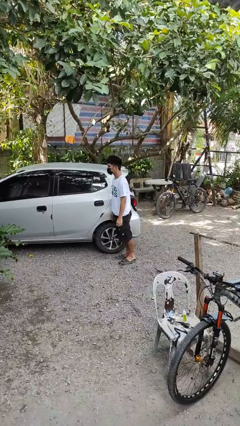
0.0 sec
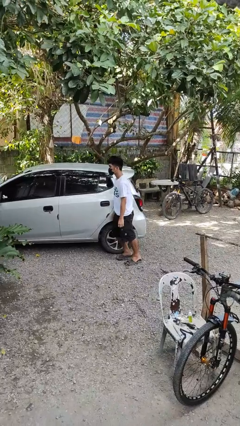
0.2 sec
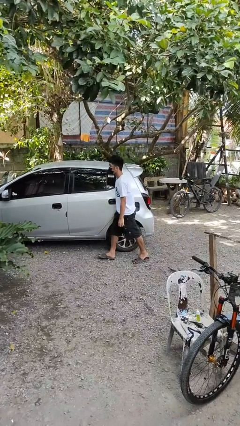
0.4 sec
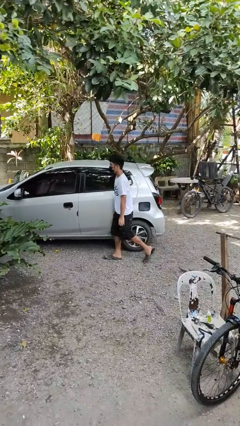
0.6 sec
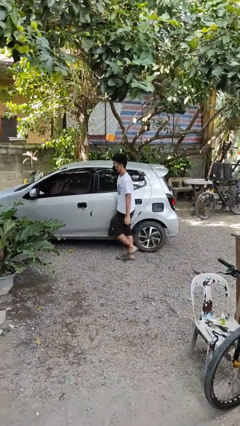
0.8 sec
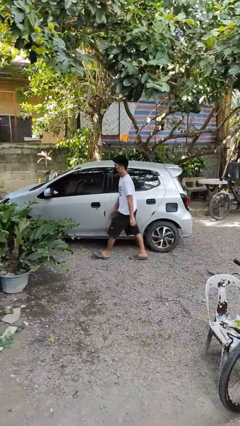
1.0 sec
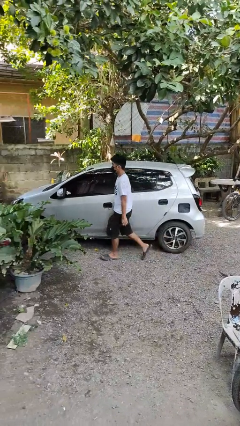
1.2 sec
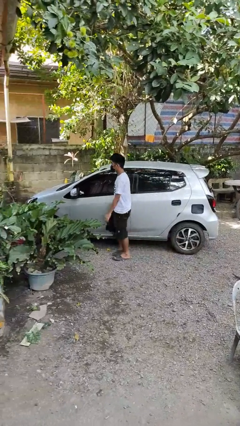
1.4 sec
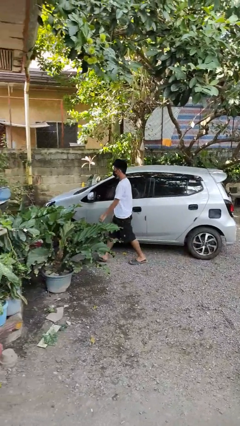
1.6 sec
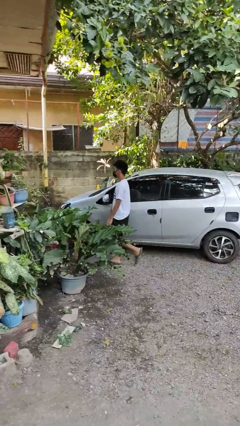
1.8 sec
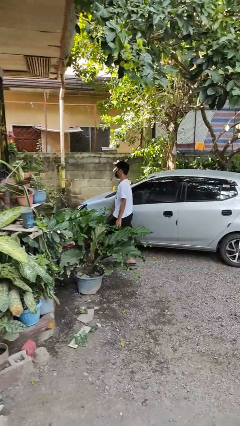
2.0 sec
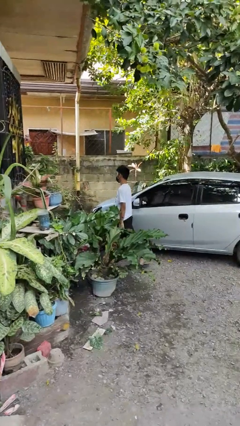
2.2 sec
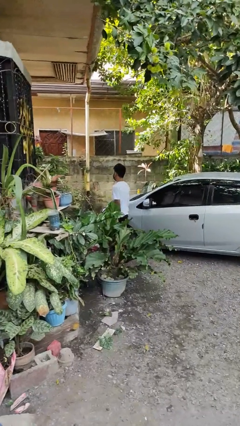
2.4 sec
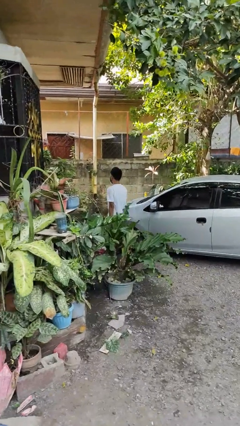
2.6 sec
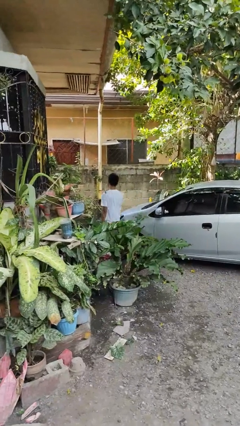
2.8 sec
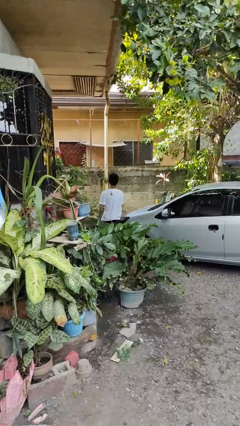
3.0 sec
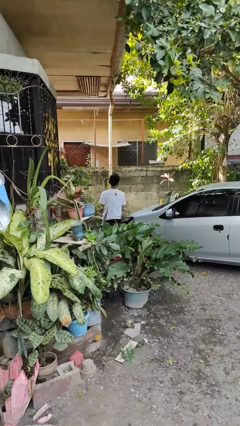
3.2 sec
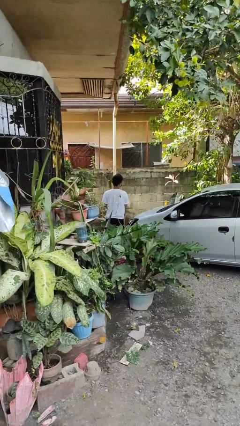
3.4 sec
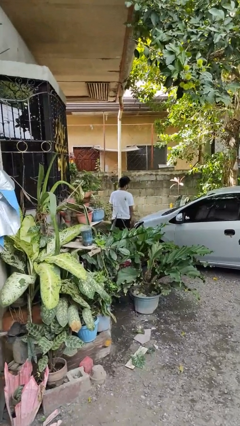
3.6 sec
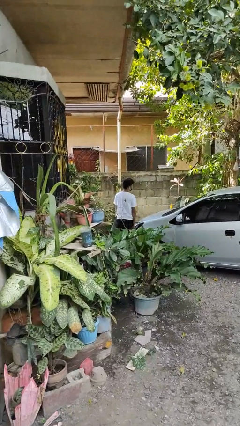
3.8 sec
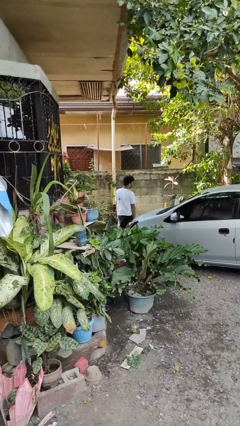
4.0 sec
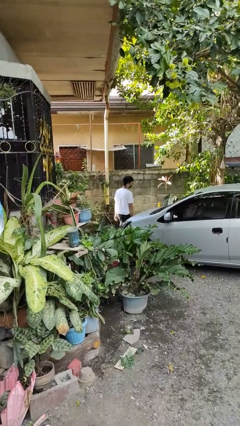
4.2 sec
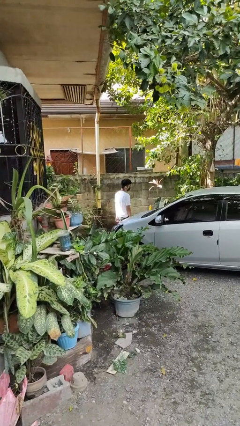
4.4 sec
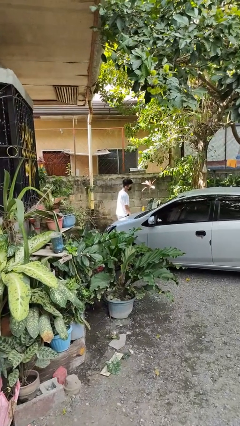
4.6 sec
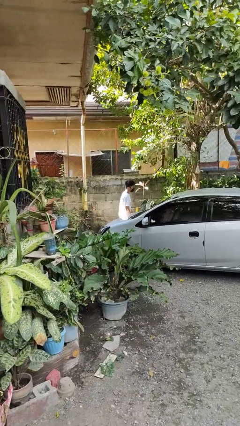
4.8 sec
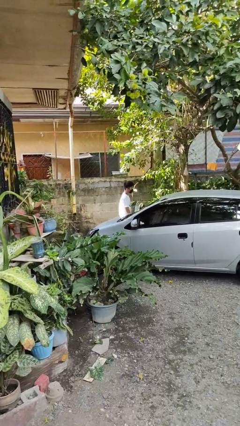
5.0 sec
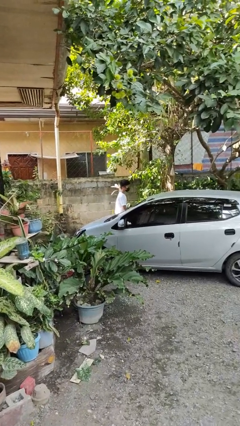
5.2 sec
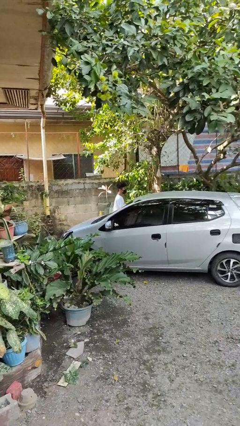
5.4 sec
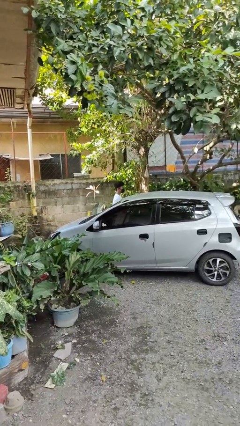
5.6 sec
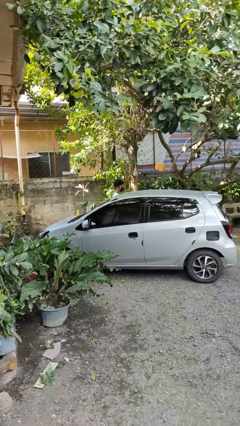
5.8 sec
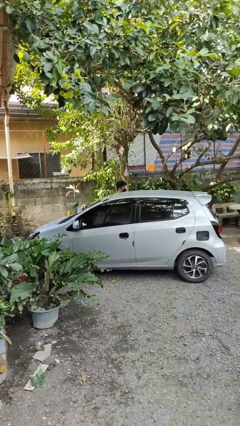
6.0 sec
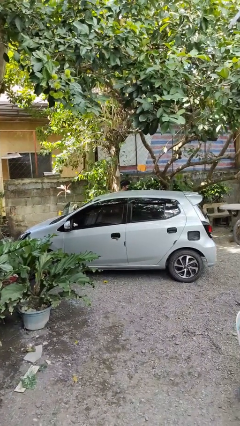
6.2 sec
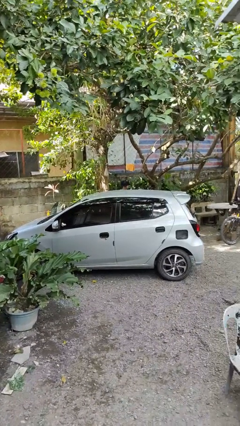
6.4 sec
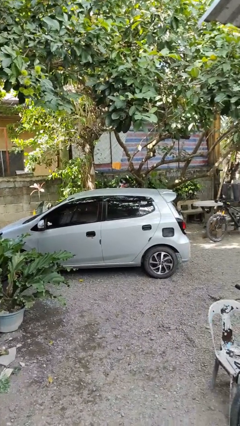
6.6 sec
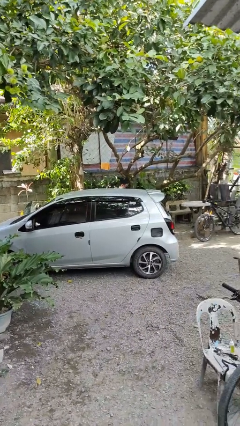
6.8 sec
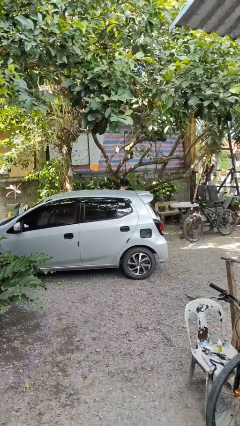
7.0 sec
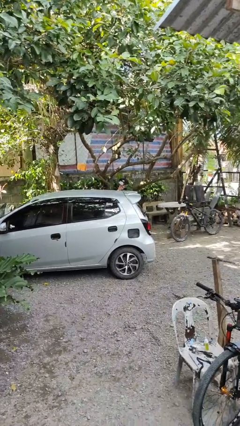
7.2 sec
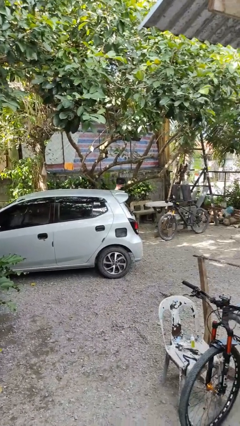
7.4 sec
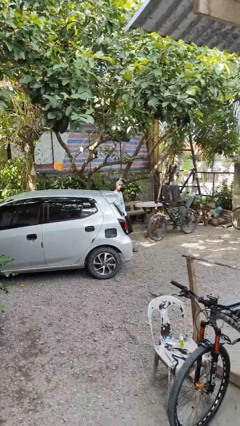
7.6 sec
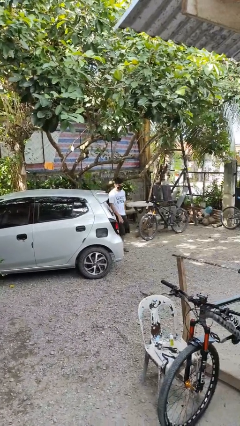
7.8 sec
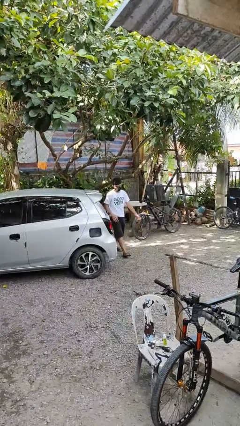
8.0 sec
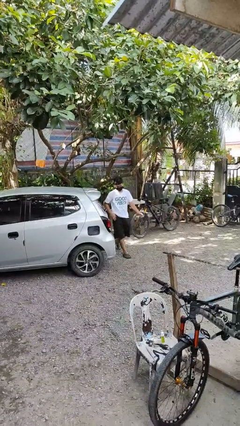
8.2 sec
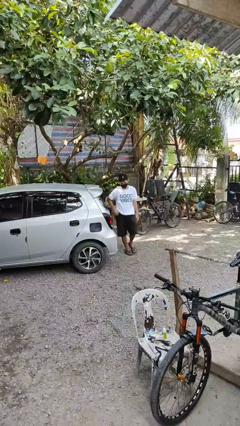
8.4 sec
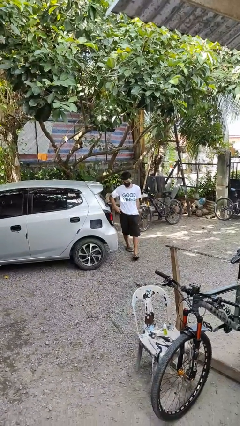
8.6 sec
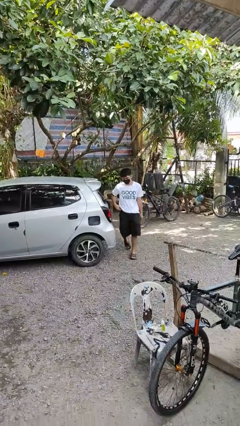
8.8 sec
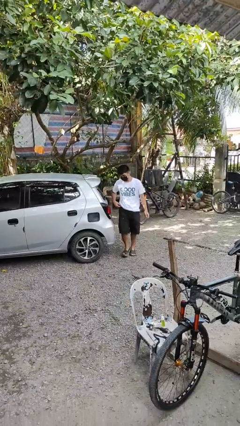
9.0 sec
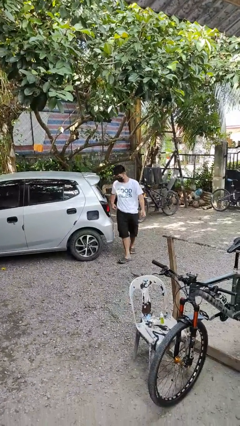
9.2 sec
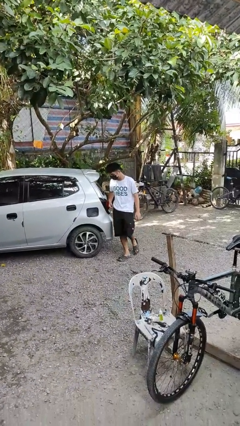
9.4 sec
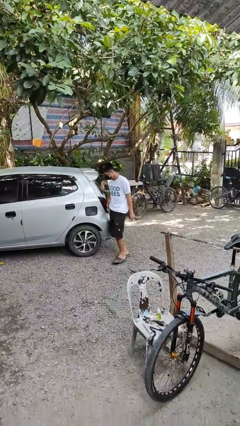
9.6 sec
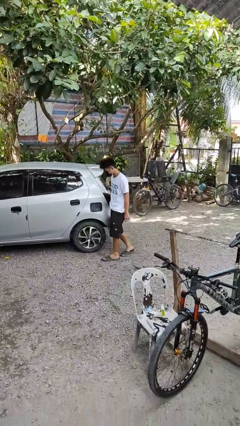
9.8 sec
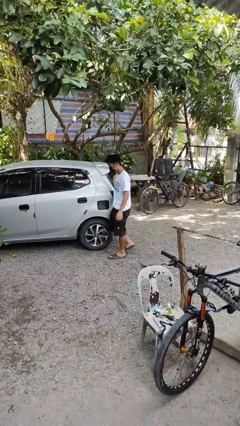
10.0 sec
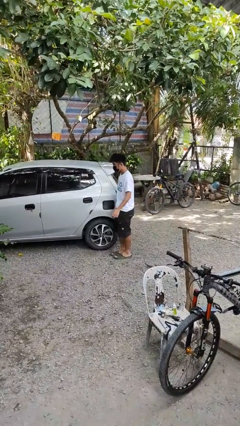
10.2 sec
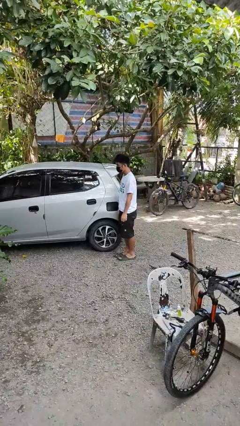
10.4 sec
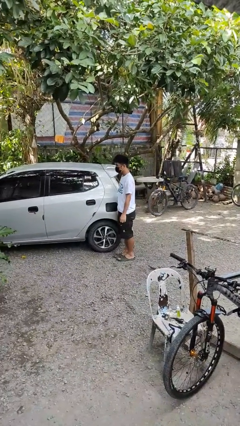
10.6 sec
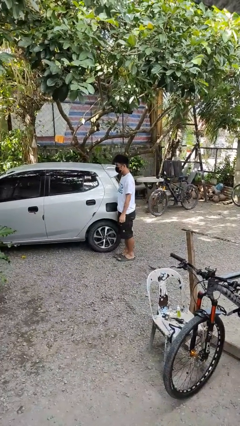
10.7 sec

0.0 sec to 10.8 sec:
person walks around car

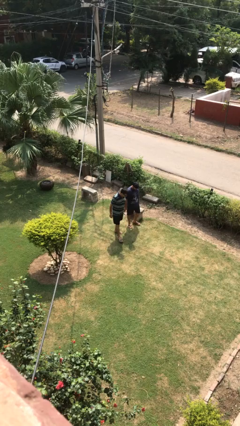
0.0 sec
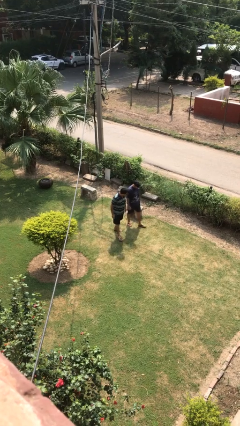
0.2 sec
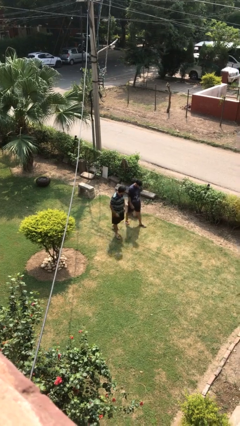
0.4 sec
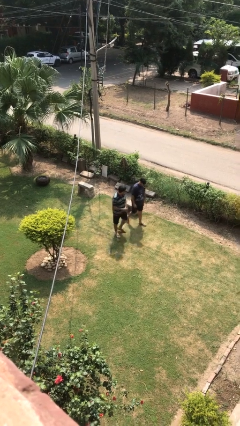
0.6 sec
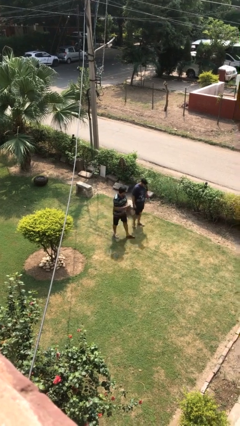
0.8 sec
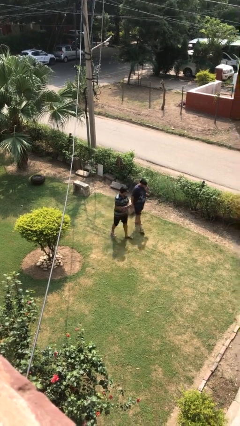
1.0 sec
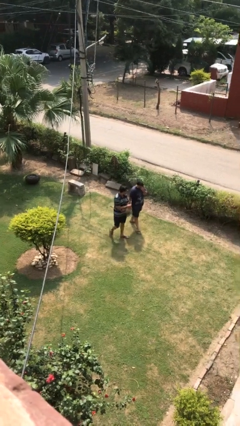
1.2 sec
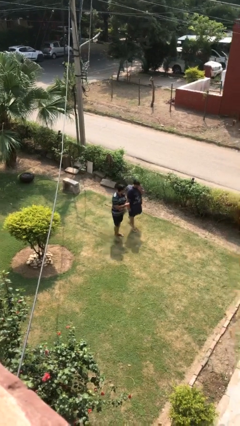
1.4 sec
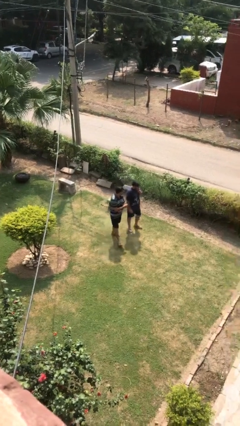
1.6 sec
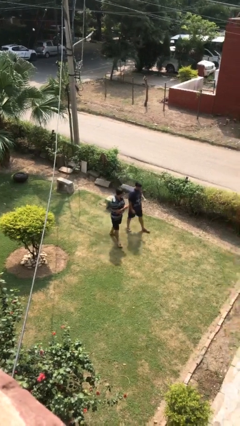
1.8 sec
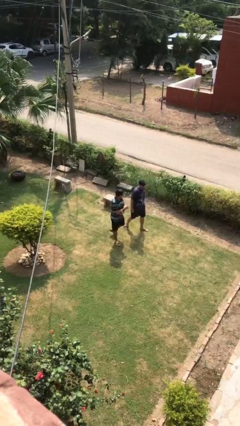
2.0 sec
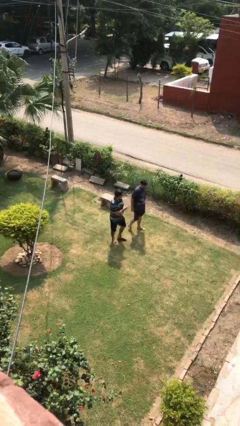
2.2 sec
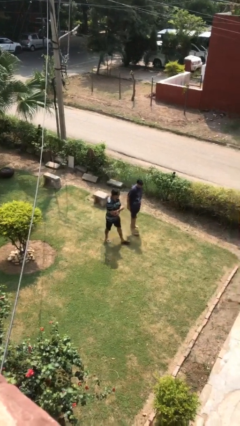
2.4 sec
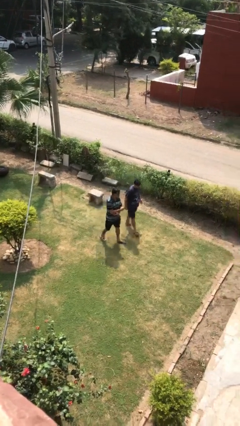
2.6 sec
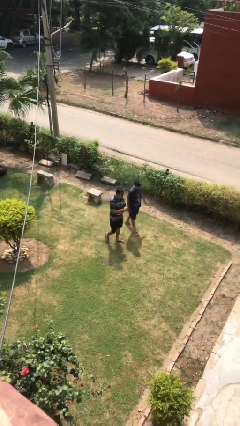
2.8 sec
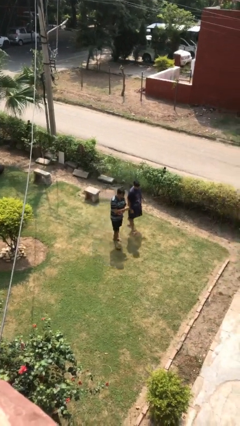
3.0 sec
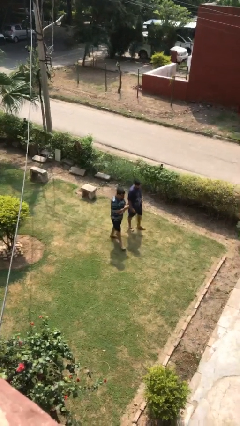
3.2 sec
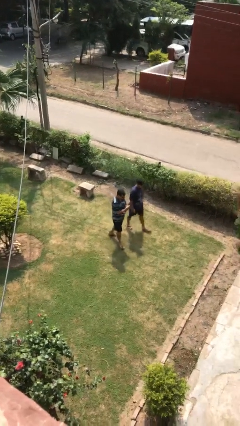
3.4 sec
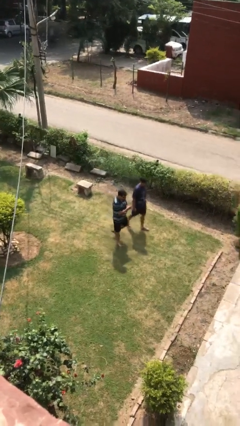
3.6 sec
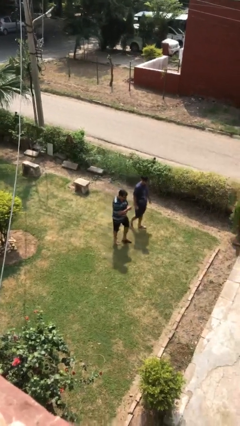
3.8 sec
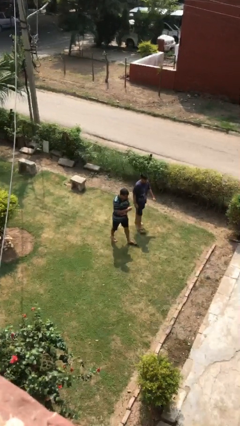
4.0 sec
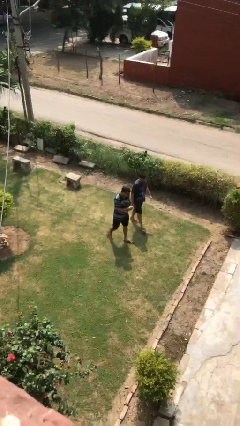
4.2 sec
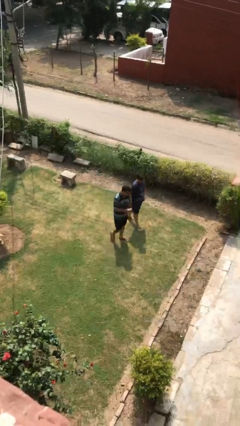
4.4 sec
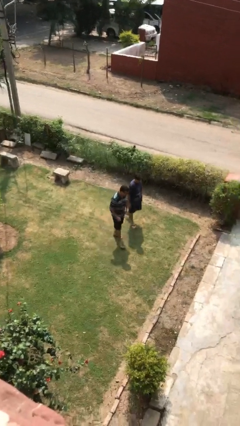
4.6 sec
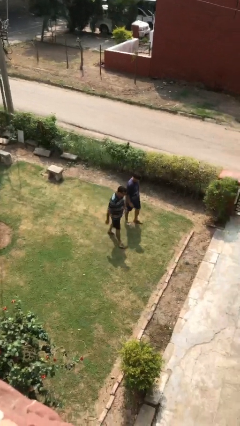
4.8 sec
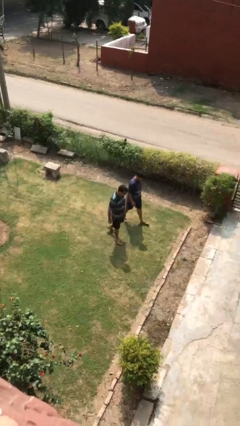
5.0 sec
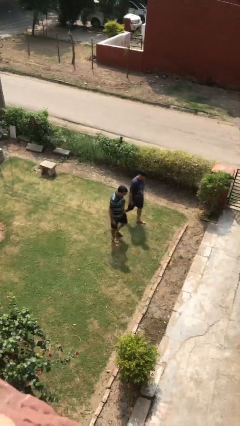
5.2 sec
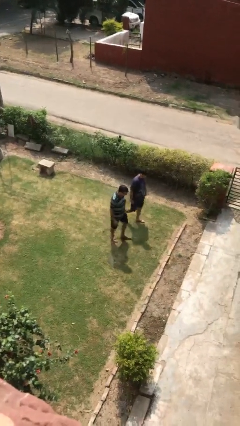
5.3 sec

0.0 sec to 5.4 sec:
person talks to person

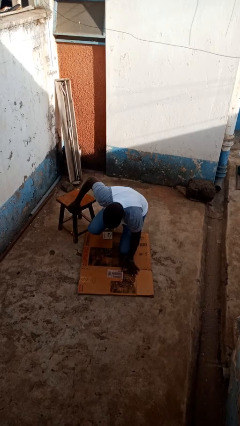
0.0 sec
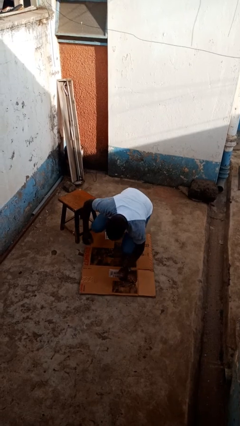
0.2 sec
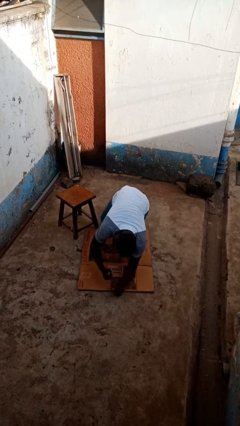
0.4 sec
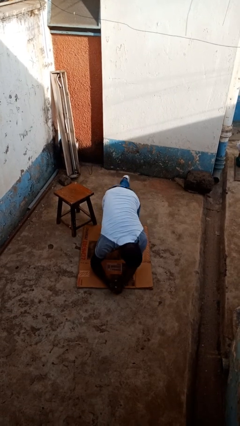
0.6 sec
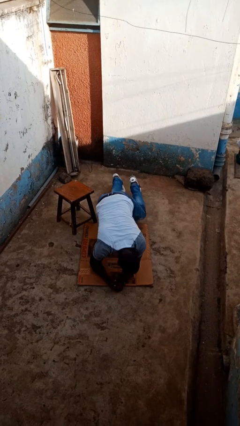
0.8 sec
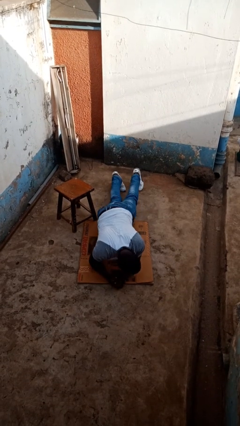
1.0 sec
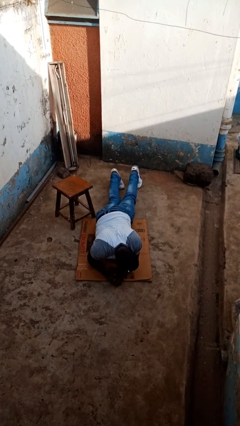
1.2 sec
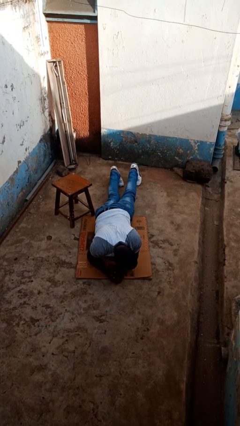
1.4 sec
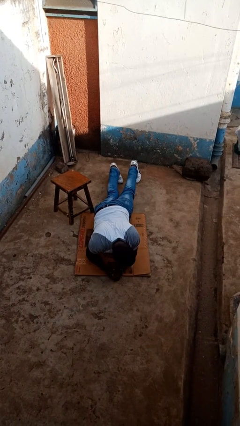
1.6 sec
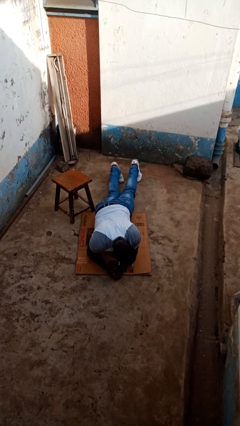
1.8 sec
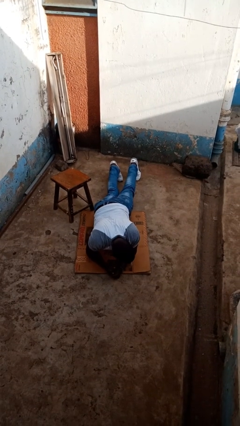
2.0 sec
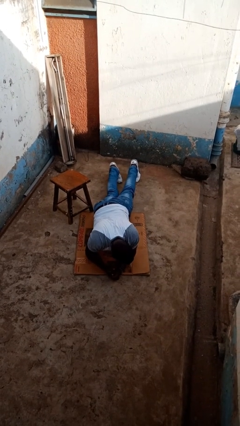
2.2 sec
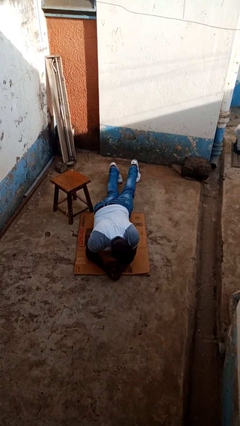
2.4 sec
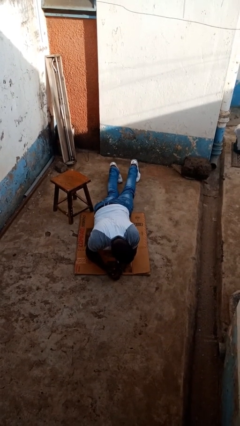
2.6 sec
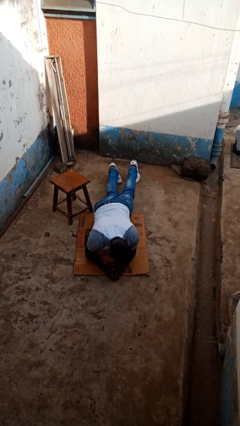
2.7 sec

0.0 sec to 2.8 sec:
person lies down on floor
